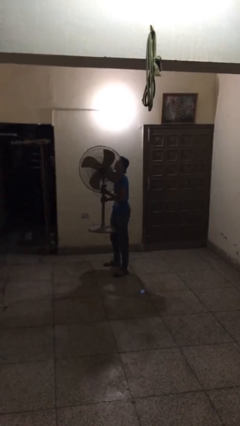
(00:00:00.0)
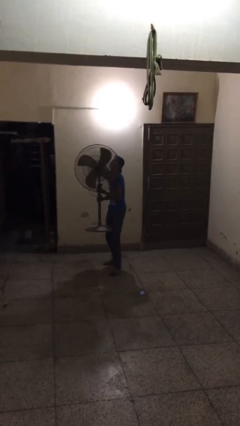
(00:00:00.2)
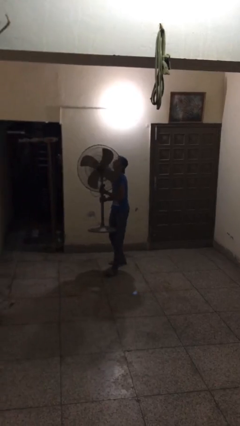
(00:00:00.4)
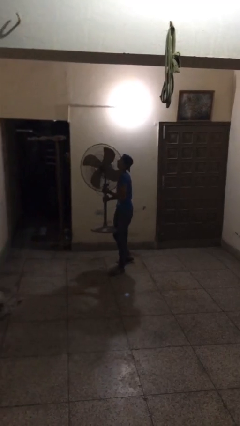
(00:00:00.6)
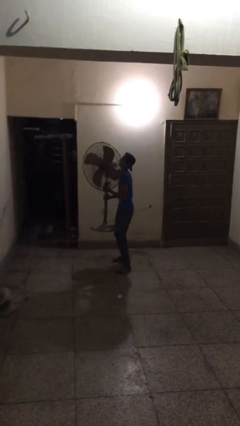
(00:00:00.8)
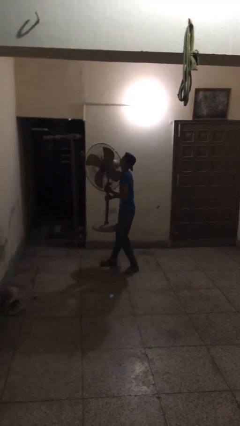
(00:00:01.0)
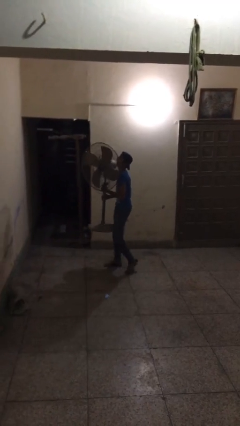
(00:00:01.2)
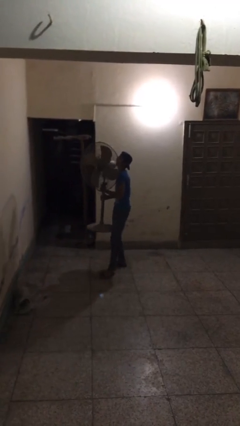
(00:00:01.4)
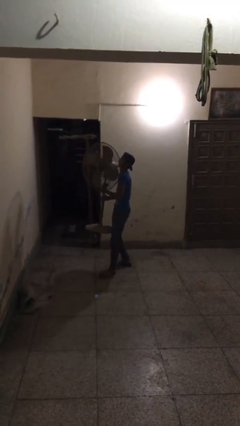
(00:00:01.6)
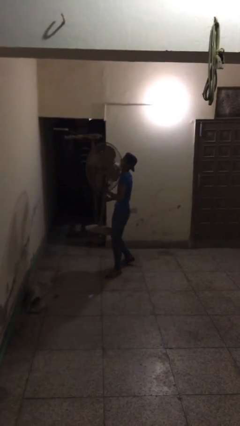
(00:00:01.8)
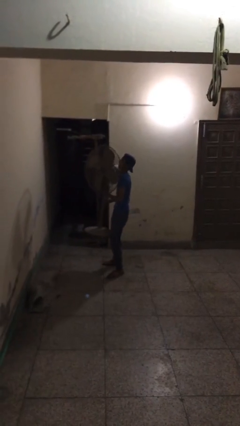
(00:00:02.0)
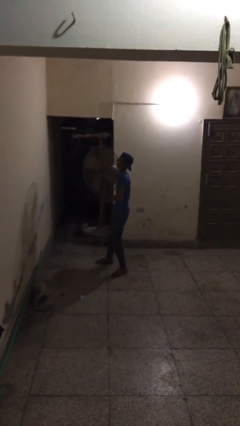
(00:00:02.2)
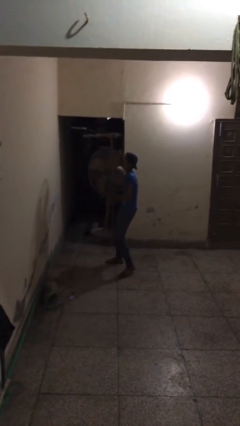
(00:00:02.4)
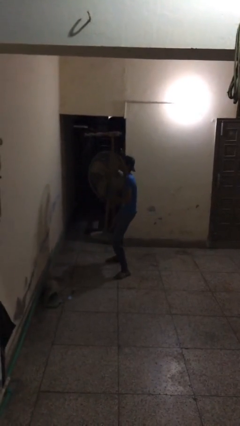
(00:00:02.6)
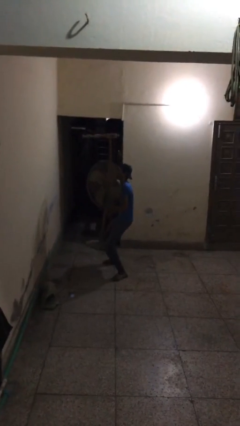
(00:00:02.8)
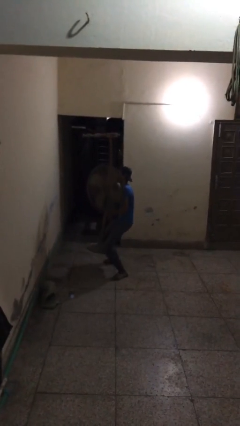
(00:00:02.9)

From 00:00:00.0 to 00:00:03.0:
person carries heavy object

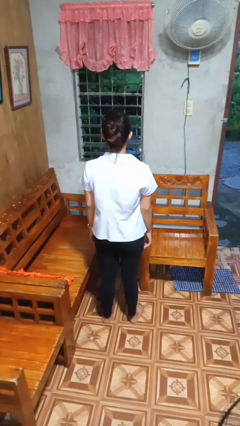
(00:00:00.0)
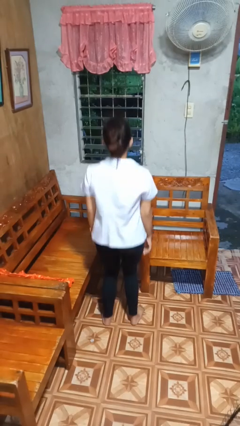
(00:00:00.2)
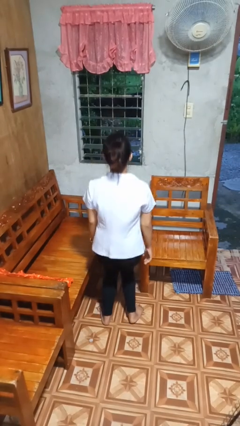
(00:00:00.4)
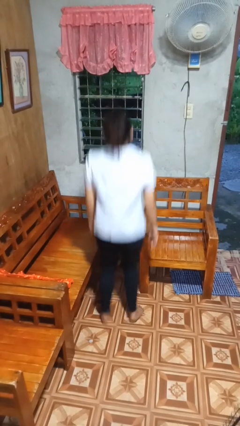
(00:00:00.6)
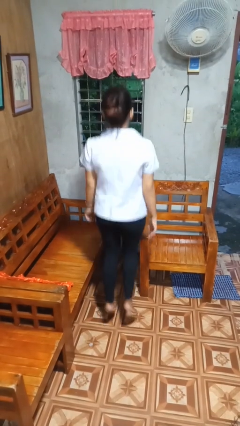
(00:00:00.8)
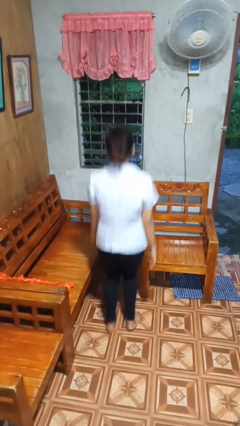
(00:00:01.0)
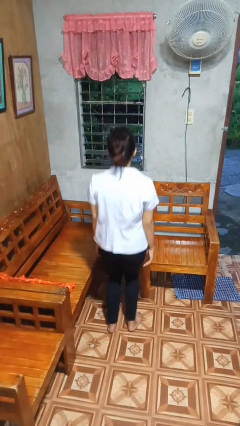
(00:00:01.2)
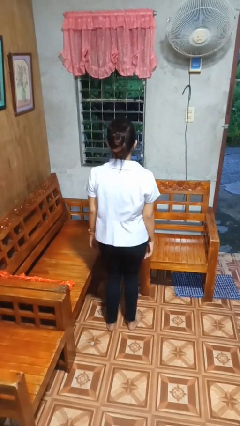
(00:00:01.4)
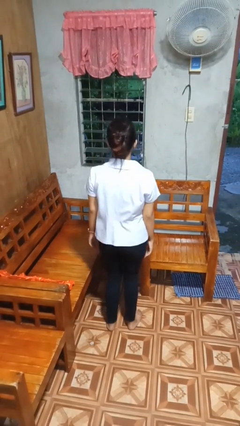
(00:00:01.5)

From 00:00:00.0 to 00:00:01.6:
person jumps

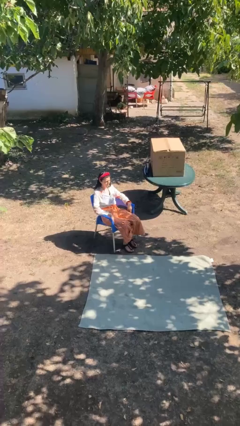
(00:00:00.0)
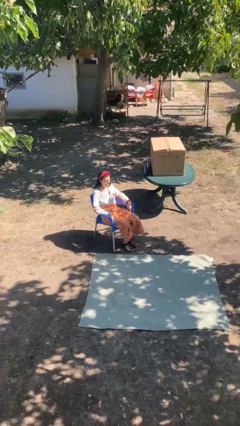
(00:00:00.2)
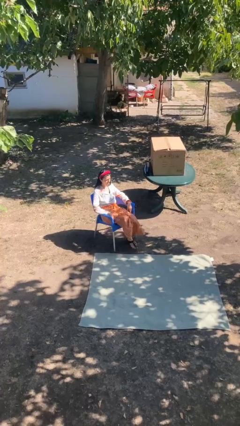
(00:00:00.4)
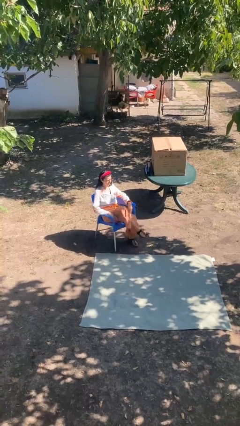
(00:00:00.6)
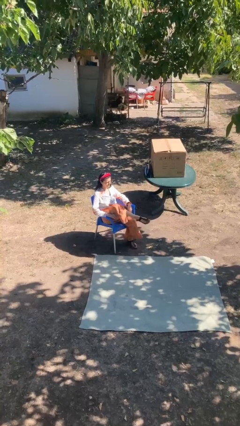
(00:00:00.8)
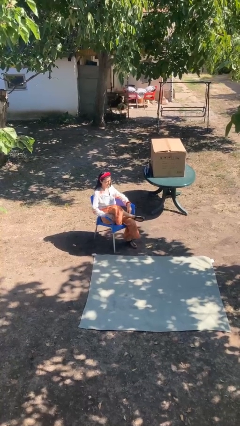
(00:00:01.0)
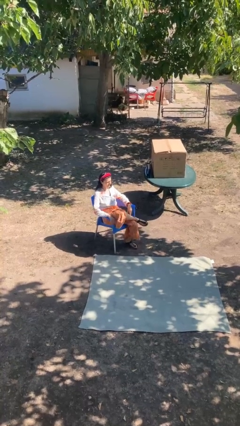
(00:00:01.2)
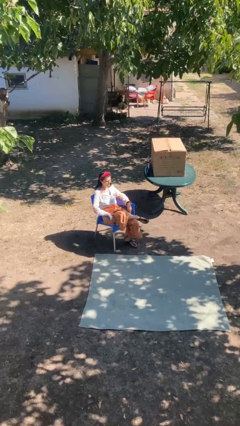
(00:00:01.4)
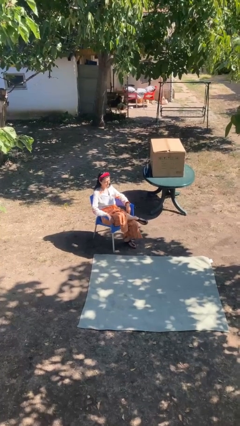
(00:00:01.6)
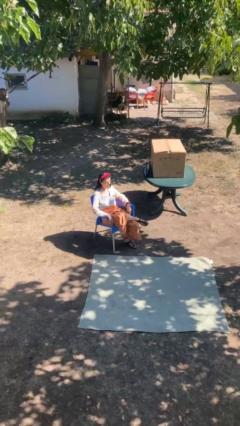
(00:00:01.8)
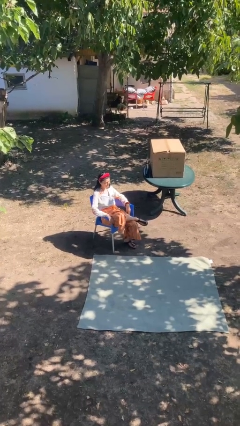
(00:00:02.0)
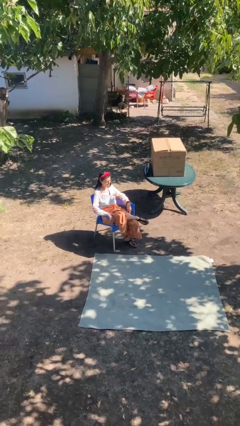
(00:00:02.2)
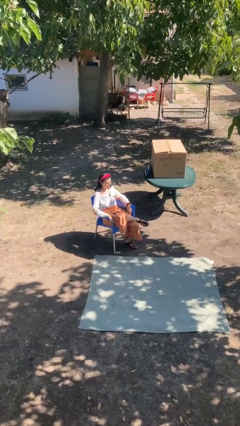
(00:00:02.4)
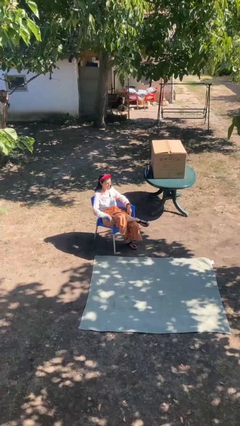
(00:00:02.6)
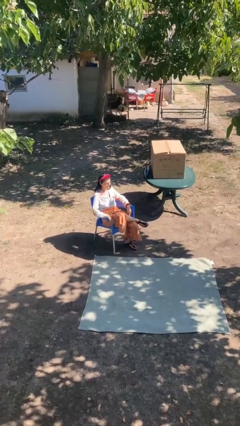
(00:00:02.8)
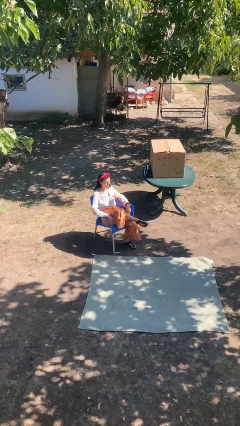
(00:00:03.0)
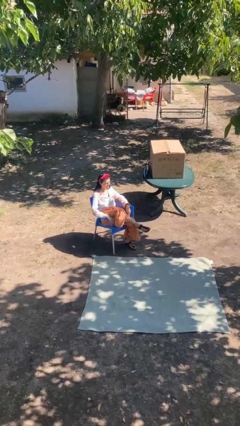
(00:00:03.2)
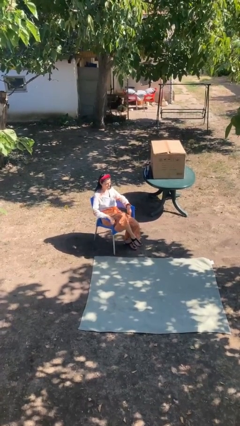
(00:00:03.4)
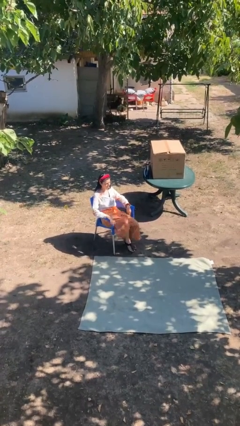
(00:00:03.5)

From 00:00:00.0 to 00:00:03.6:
person crosses legs

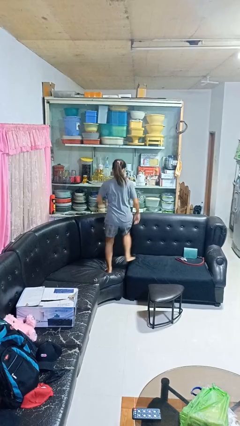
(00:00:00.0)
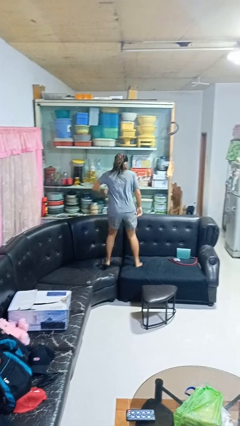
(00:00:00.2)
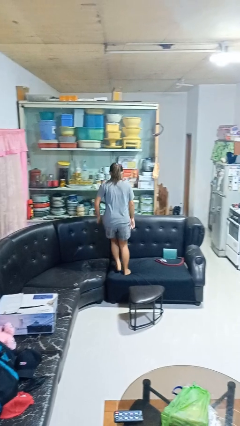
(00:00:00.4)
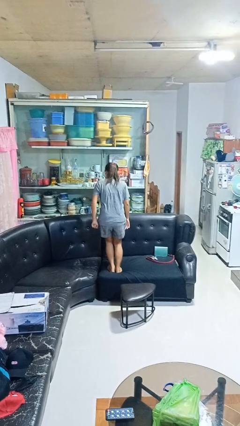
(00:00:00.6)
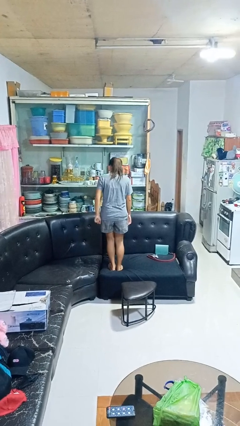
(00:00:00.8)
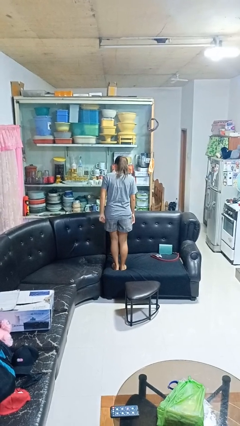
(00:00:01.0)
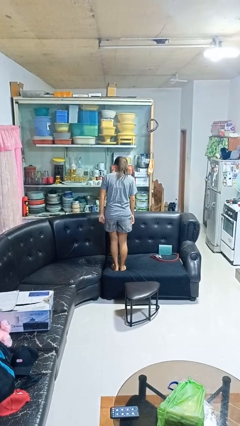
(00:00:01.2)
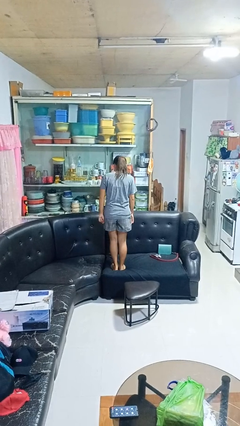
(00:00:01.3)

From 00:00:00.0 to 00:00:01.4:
person jumps on couch

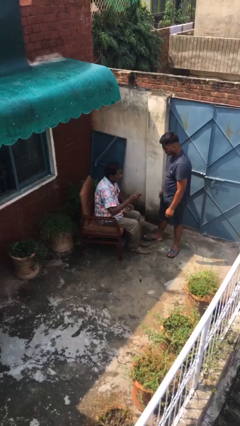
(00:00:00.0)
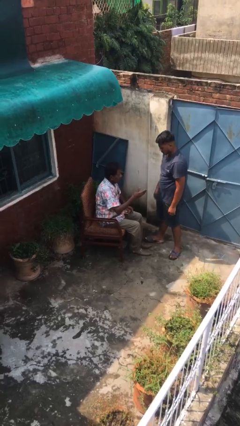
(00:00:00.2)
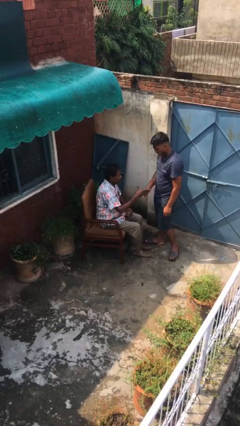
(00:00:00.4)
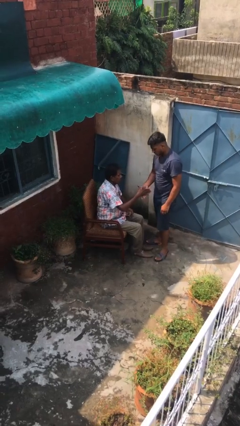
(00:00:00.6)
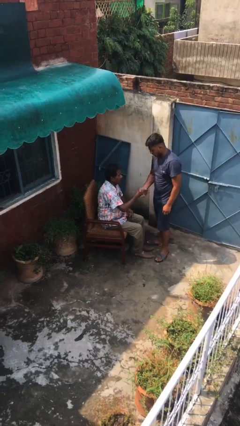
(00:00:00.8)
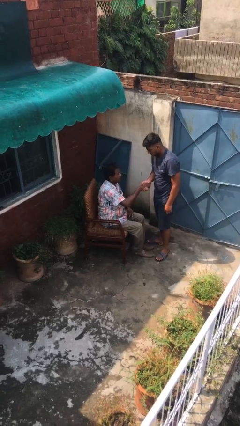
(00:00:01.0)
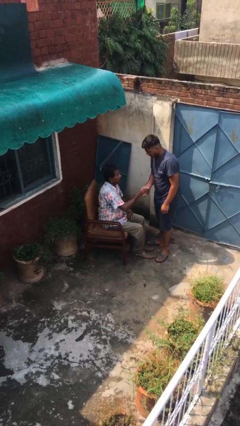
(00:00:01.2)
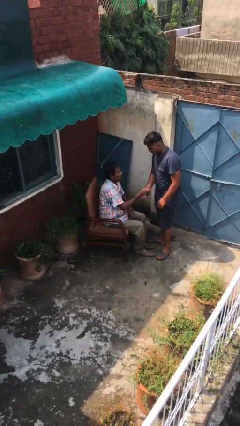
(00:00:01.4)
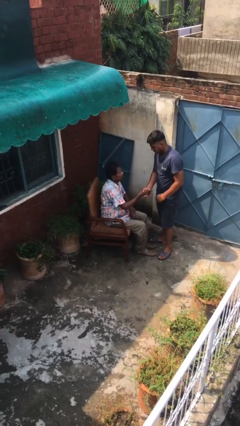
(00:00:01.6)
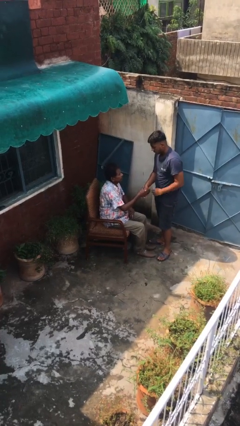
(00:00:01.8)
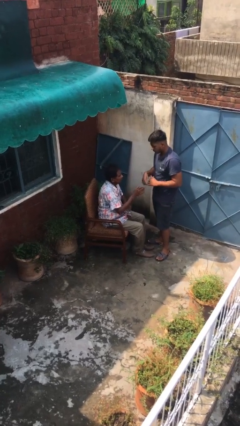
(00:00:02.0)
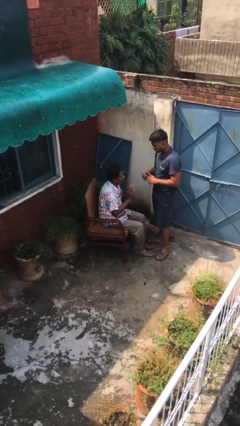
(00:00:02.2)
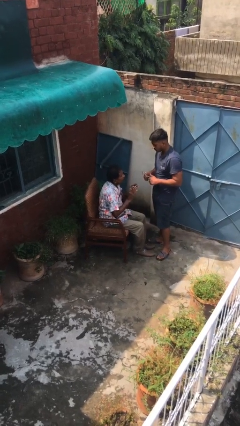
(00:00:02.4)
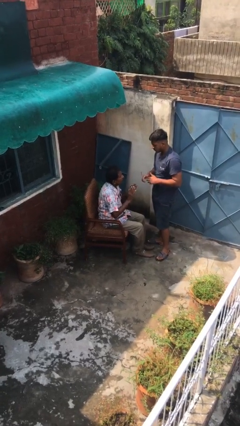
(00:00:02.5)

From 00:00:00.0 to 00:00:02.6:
person shakes hand

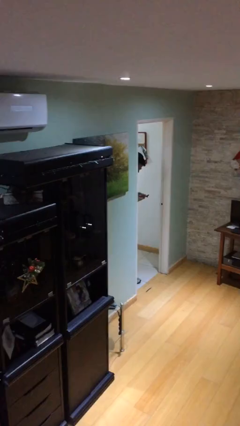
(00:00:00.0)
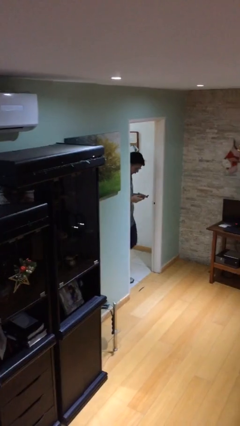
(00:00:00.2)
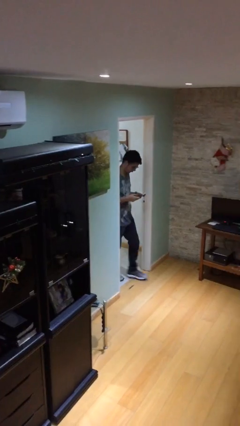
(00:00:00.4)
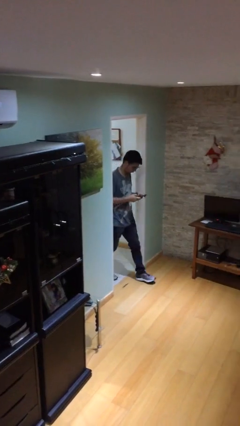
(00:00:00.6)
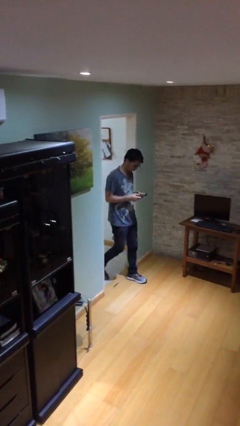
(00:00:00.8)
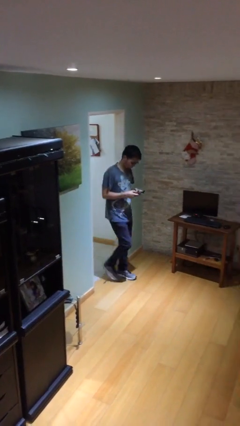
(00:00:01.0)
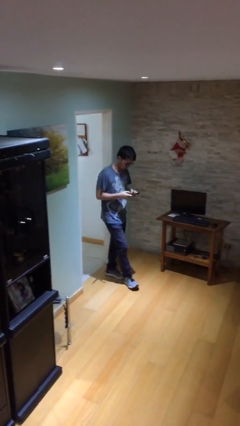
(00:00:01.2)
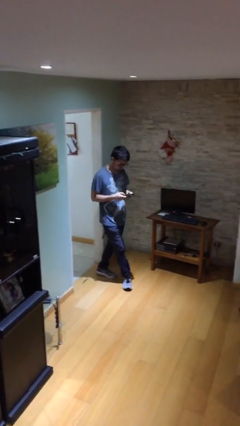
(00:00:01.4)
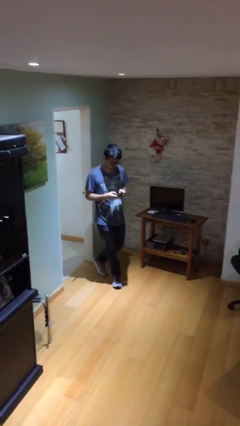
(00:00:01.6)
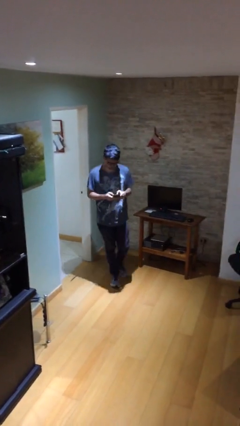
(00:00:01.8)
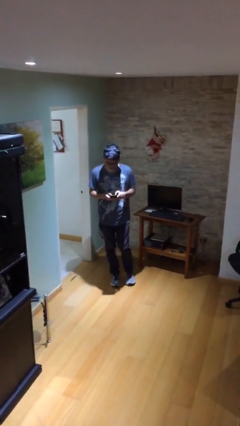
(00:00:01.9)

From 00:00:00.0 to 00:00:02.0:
person enters scene through structure

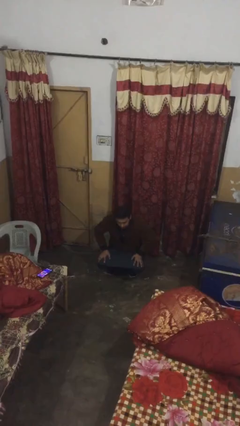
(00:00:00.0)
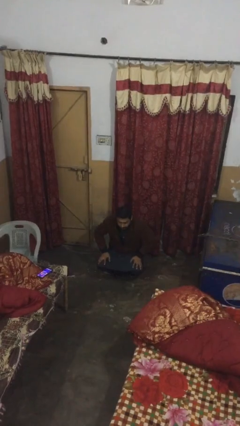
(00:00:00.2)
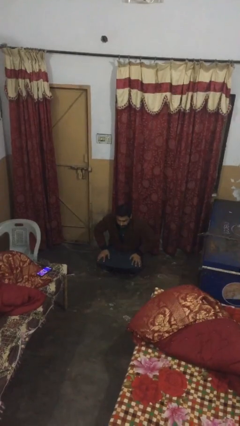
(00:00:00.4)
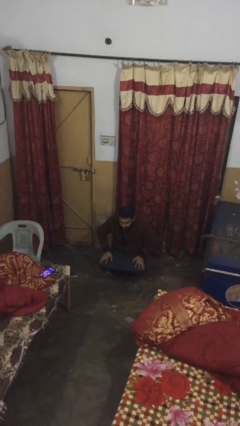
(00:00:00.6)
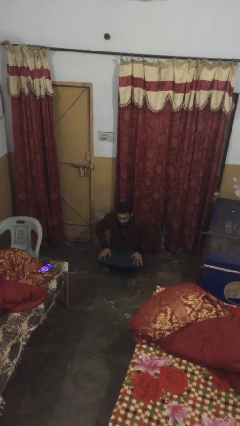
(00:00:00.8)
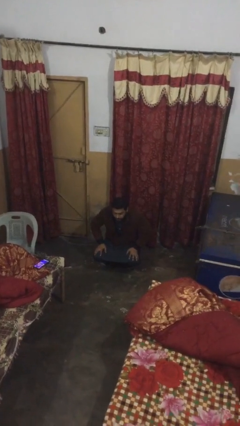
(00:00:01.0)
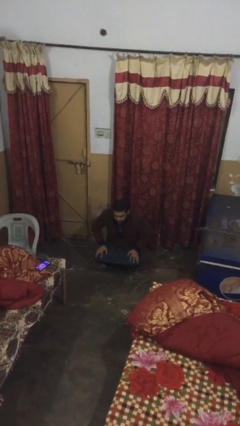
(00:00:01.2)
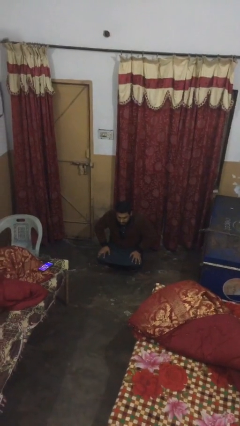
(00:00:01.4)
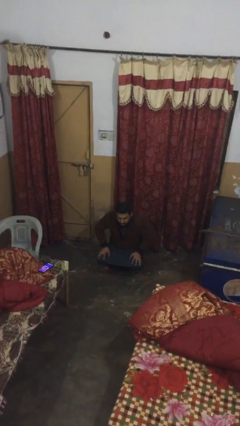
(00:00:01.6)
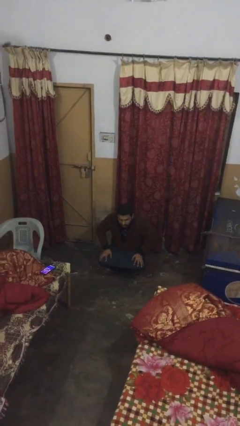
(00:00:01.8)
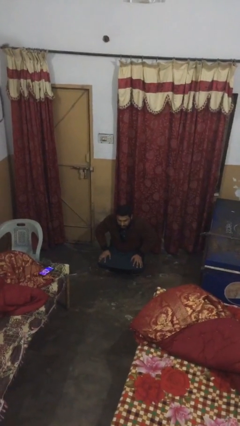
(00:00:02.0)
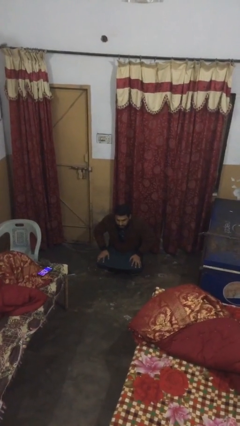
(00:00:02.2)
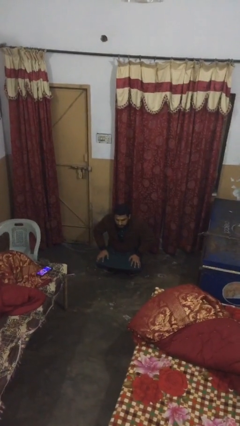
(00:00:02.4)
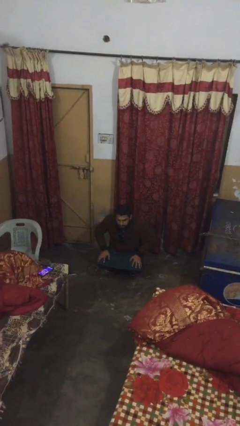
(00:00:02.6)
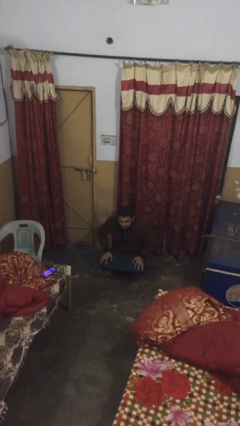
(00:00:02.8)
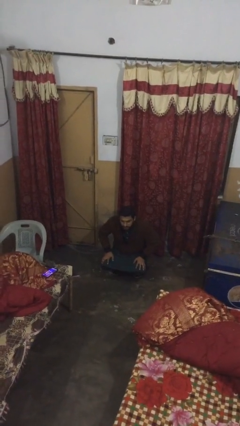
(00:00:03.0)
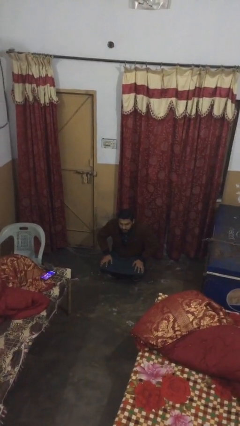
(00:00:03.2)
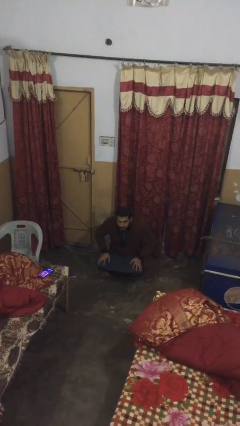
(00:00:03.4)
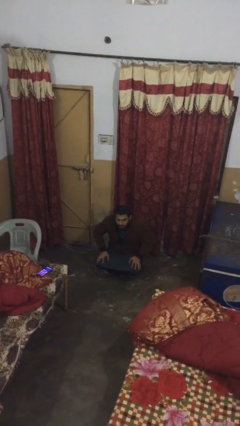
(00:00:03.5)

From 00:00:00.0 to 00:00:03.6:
person stands up
